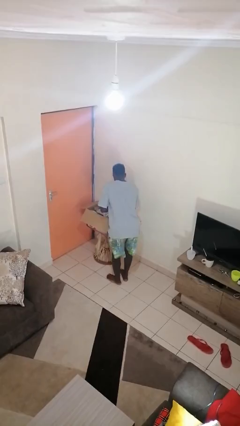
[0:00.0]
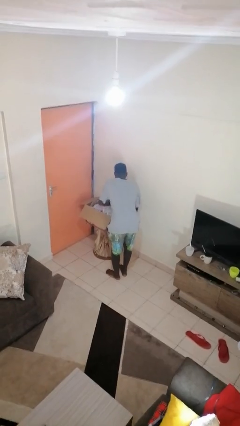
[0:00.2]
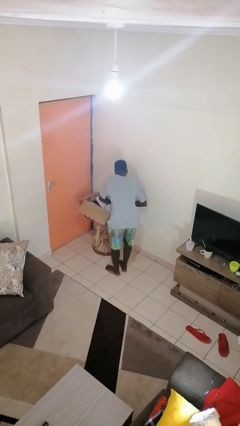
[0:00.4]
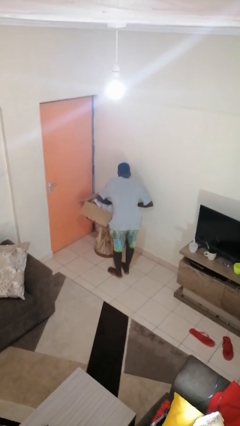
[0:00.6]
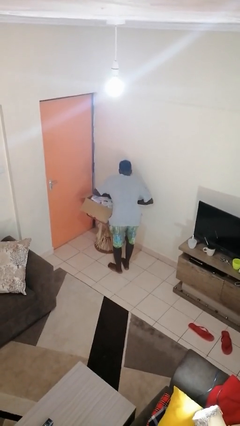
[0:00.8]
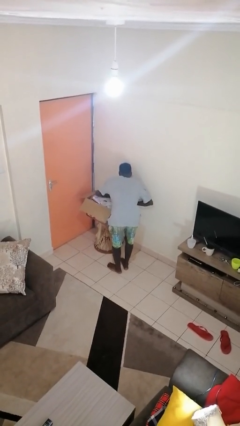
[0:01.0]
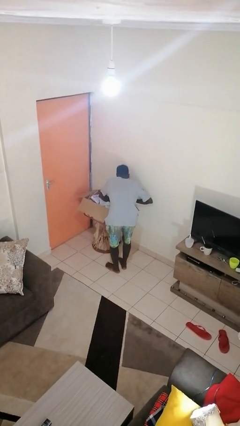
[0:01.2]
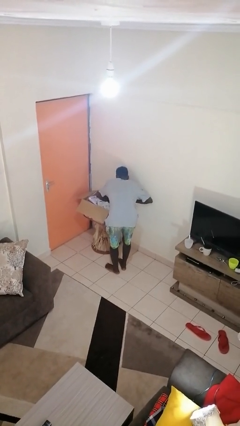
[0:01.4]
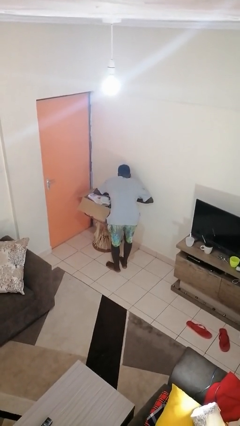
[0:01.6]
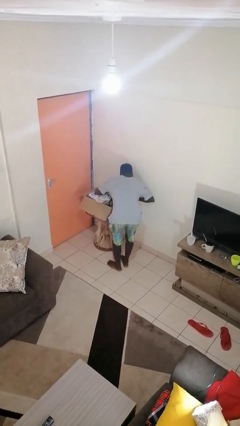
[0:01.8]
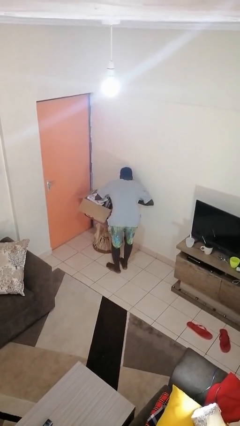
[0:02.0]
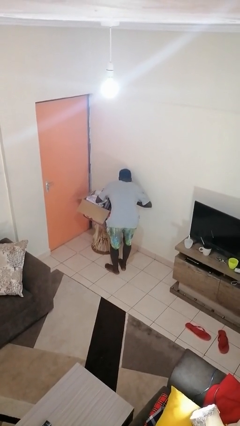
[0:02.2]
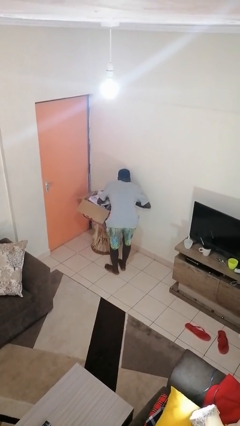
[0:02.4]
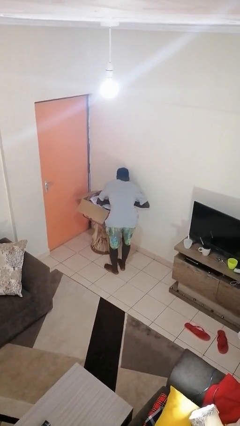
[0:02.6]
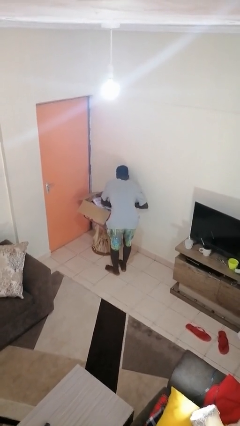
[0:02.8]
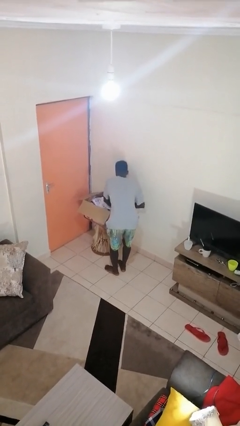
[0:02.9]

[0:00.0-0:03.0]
person searches in box

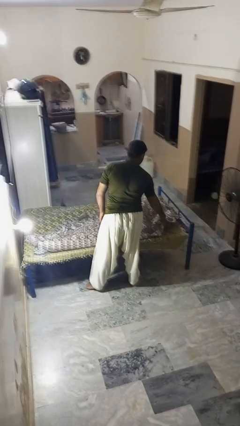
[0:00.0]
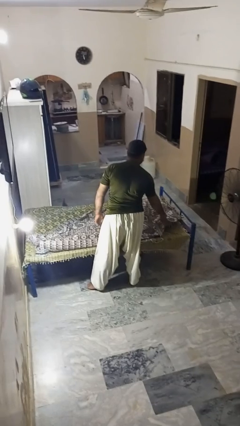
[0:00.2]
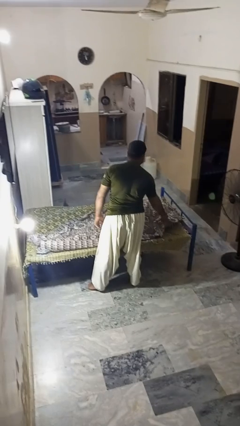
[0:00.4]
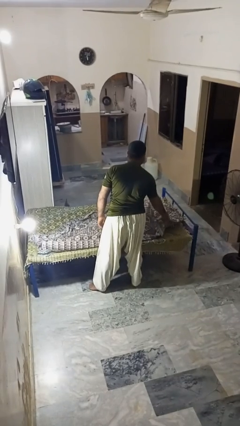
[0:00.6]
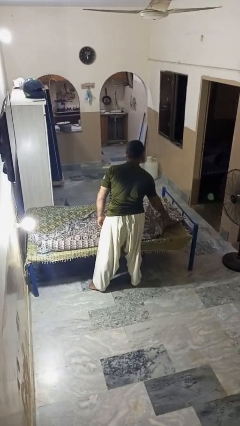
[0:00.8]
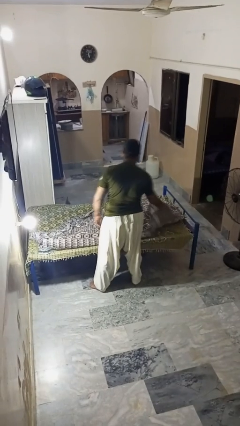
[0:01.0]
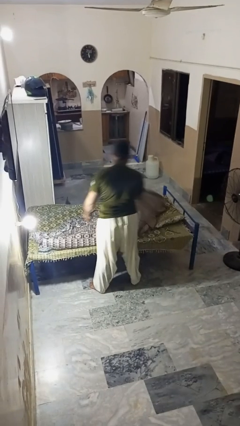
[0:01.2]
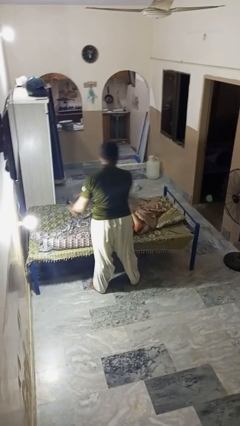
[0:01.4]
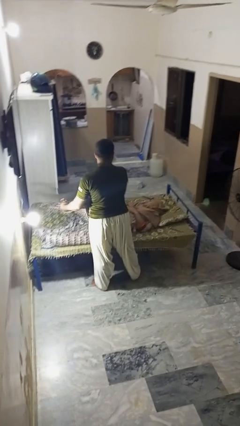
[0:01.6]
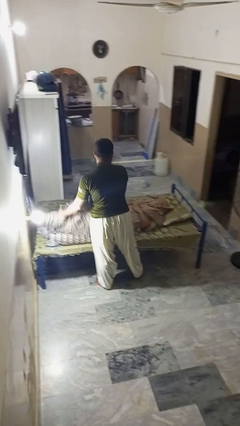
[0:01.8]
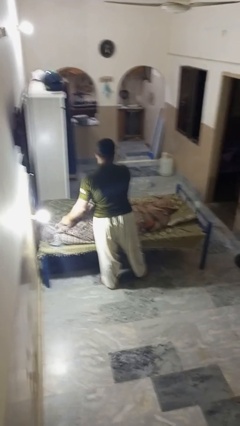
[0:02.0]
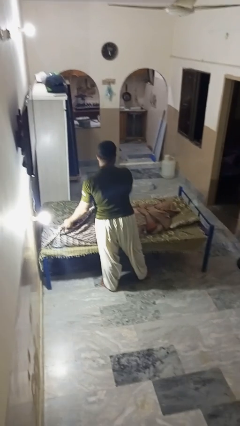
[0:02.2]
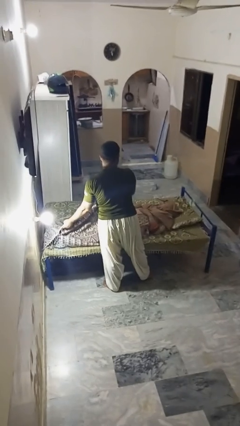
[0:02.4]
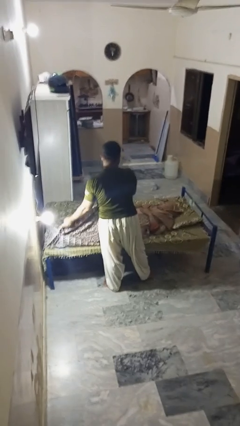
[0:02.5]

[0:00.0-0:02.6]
person uncovers friend with blanket

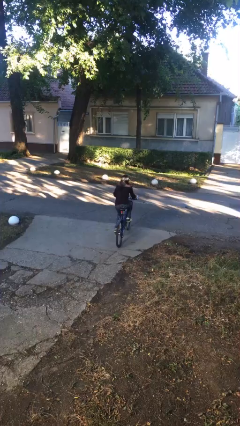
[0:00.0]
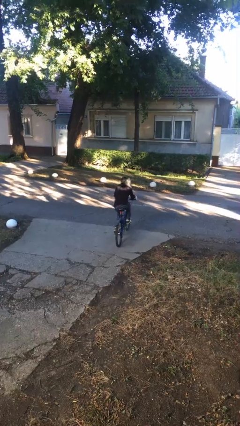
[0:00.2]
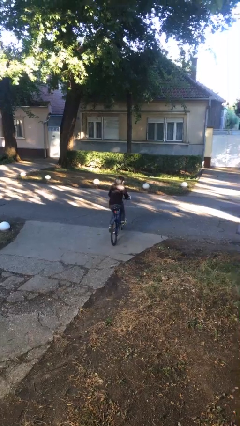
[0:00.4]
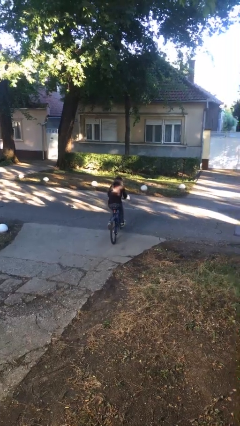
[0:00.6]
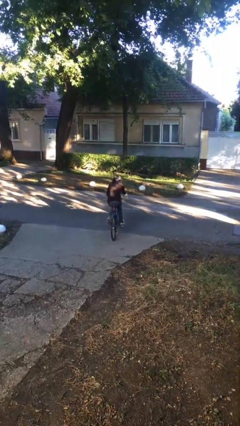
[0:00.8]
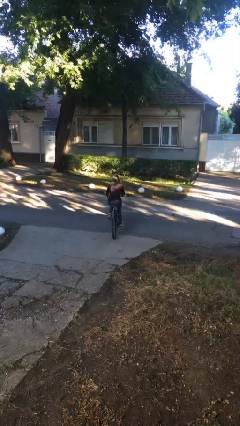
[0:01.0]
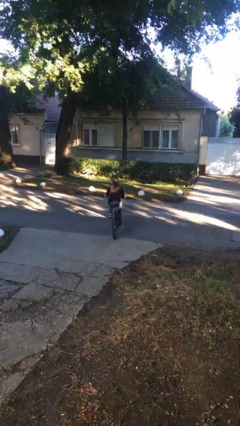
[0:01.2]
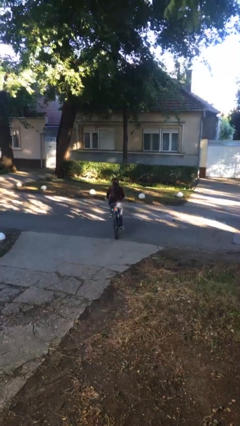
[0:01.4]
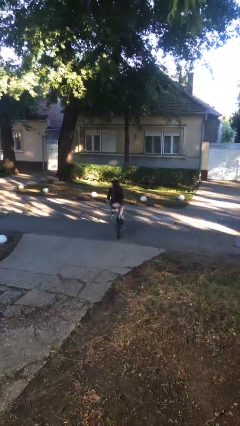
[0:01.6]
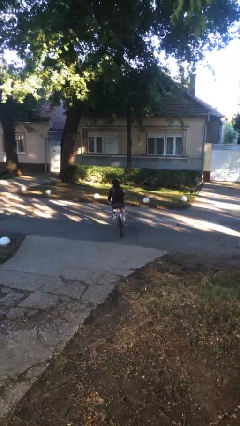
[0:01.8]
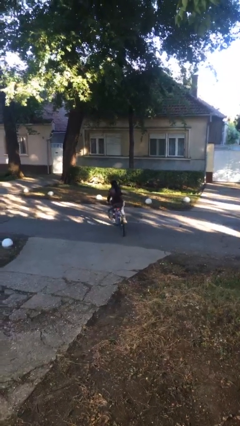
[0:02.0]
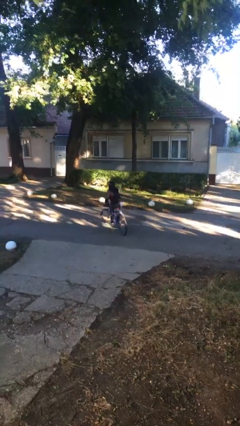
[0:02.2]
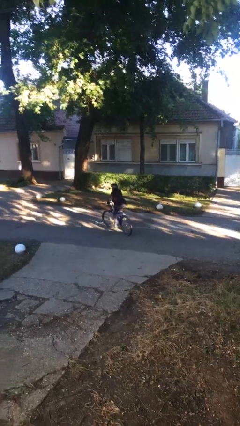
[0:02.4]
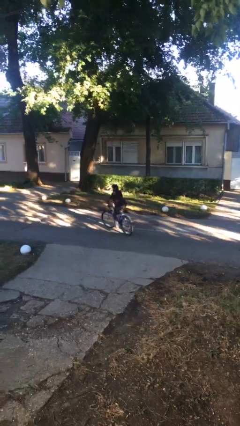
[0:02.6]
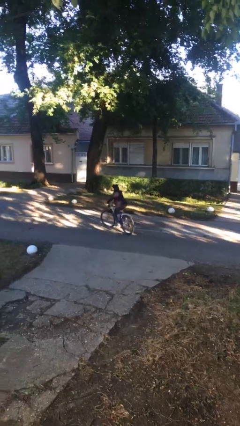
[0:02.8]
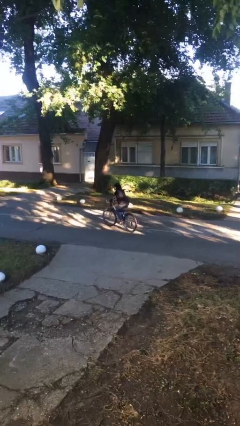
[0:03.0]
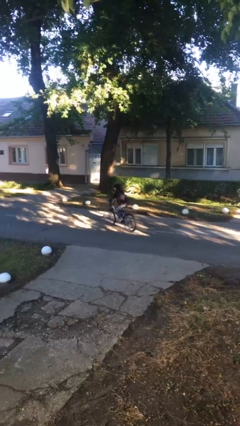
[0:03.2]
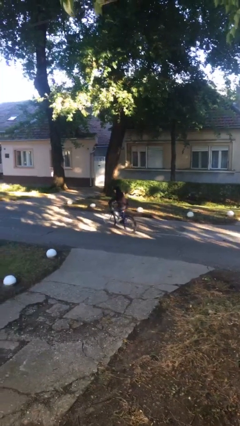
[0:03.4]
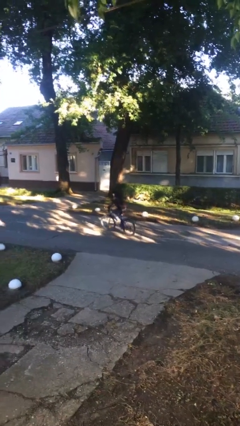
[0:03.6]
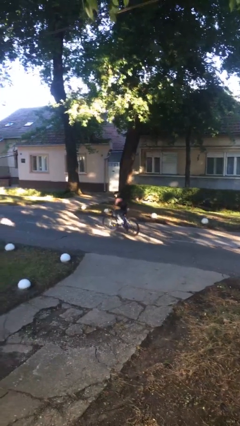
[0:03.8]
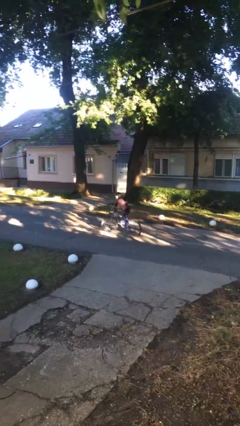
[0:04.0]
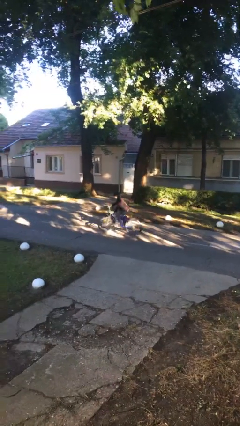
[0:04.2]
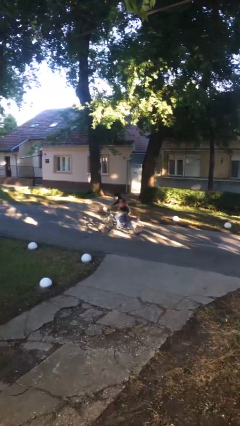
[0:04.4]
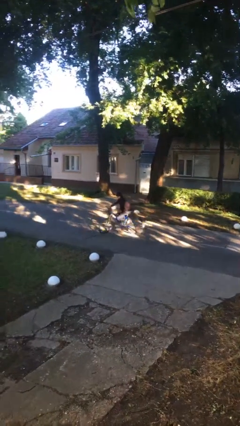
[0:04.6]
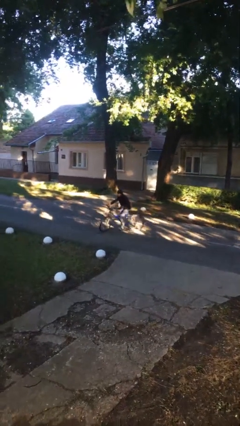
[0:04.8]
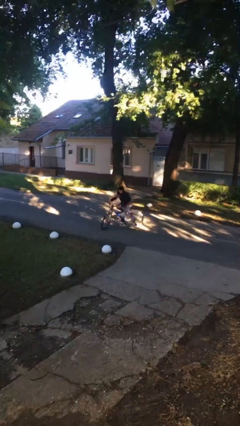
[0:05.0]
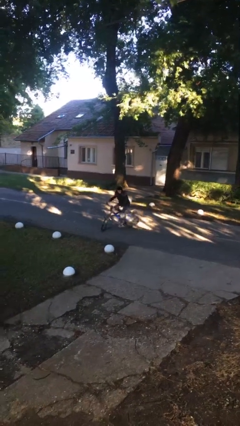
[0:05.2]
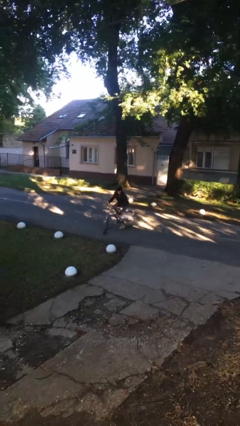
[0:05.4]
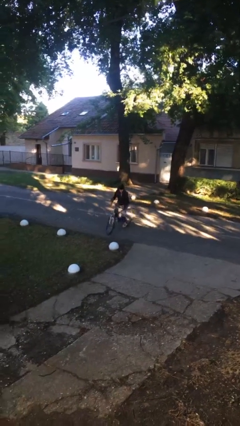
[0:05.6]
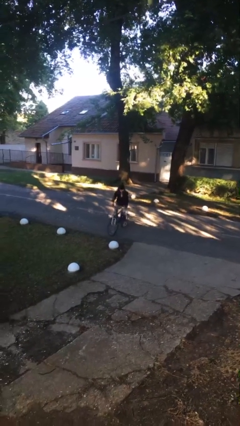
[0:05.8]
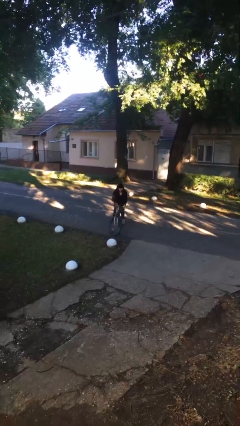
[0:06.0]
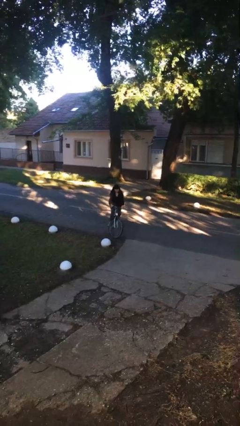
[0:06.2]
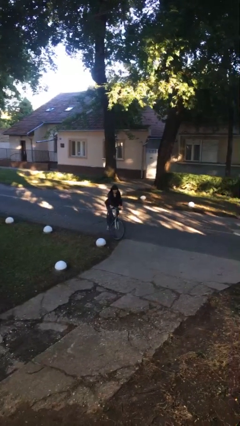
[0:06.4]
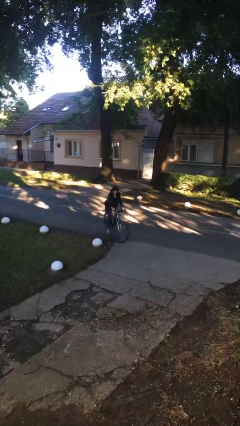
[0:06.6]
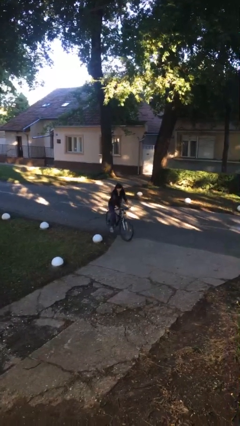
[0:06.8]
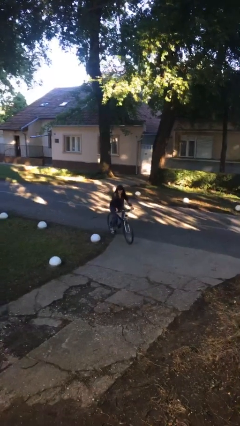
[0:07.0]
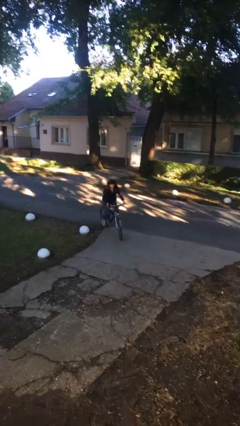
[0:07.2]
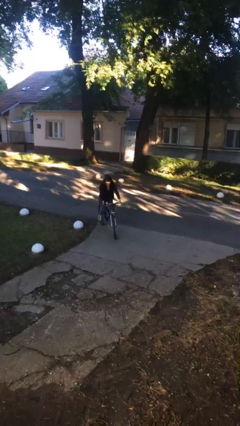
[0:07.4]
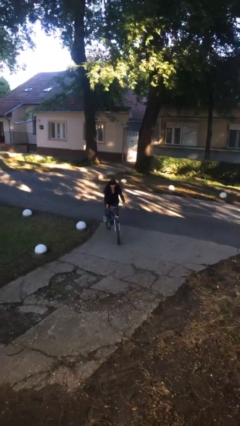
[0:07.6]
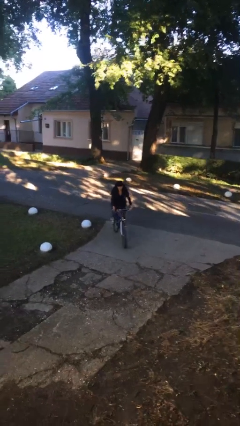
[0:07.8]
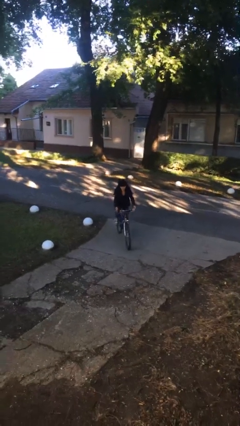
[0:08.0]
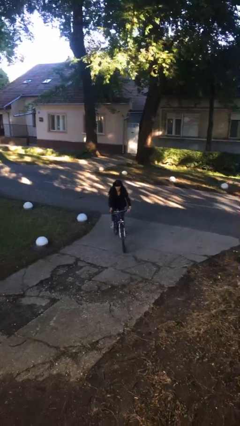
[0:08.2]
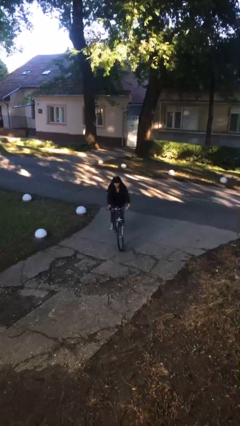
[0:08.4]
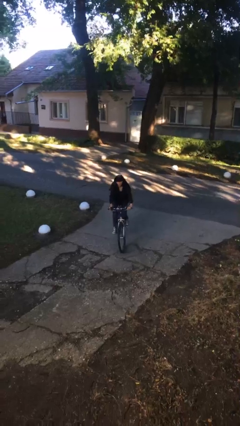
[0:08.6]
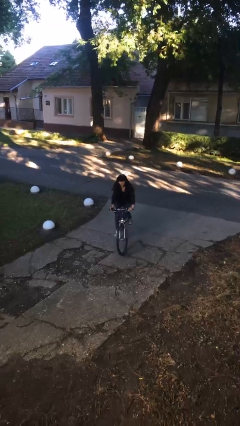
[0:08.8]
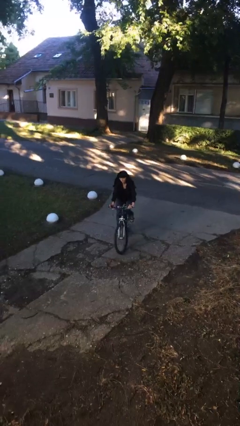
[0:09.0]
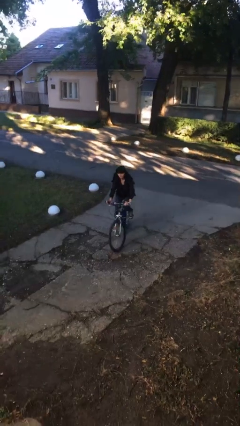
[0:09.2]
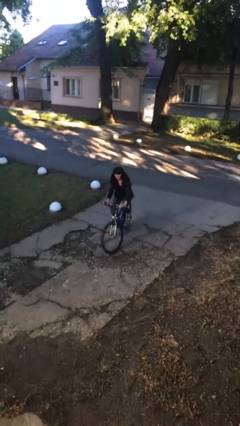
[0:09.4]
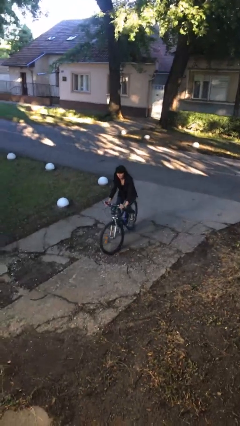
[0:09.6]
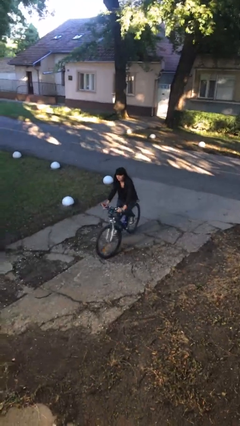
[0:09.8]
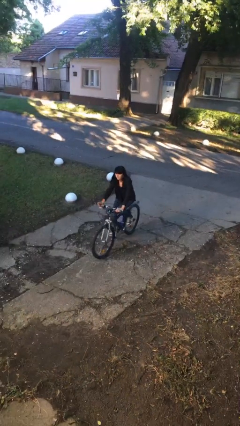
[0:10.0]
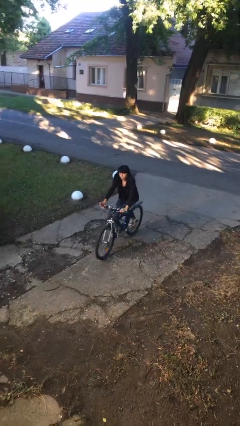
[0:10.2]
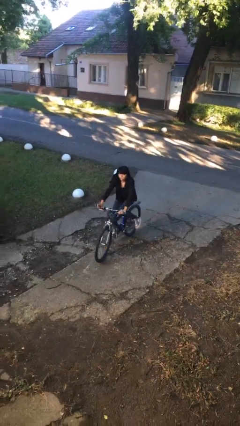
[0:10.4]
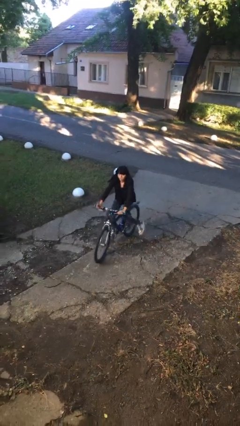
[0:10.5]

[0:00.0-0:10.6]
person rides bicycle

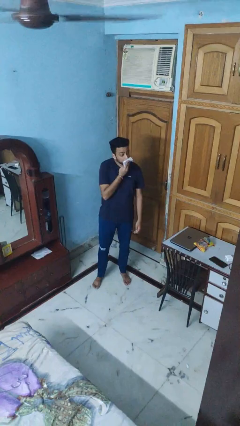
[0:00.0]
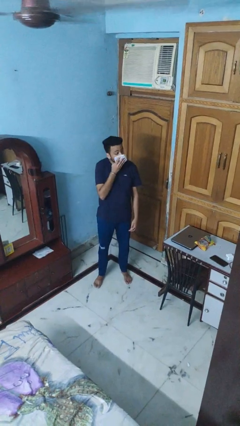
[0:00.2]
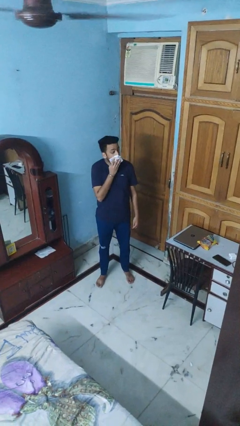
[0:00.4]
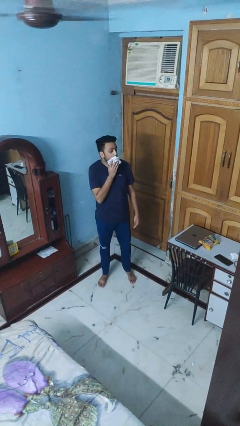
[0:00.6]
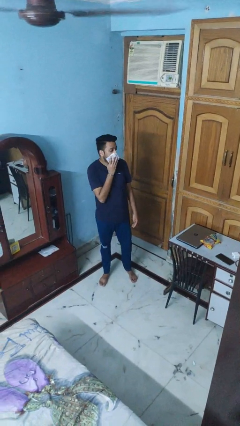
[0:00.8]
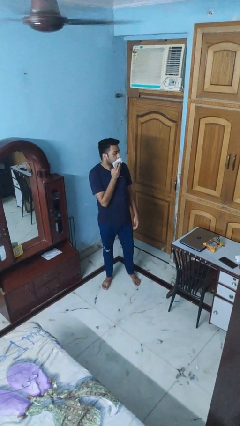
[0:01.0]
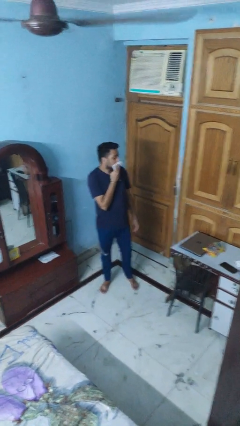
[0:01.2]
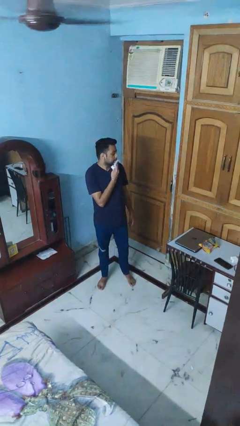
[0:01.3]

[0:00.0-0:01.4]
person wipes mouth with napkin
